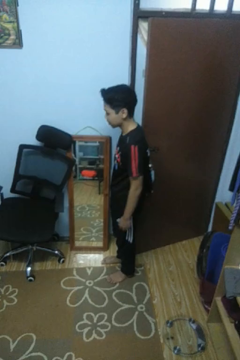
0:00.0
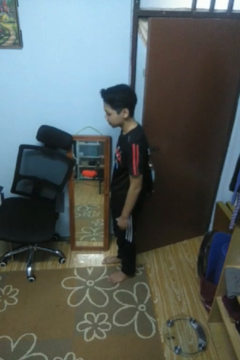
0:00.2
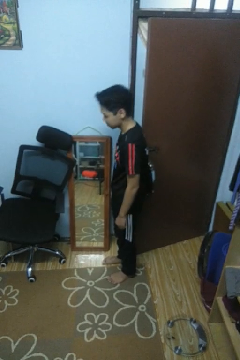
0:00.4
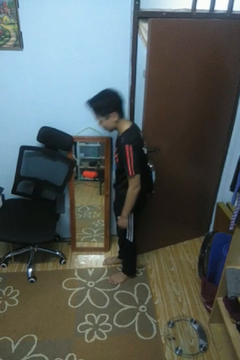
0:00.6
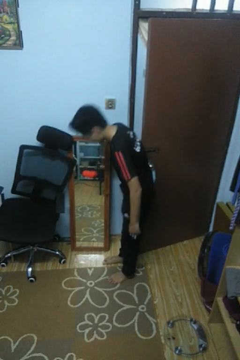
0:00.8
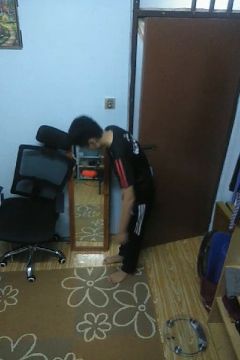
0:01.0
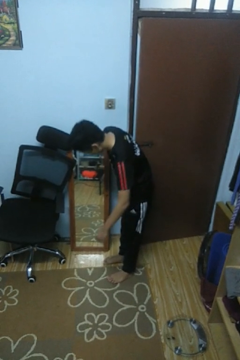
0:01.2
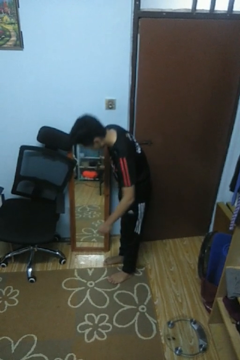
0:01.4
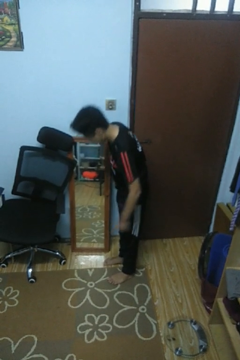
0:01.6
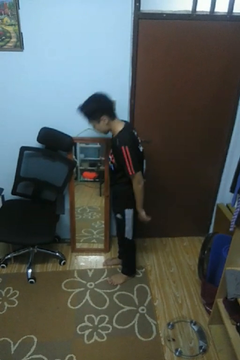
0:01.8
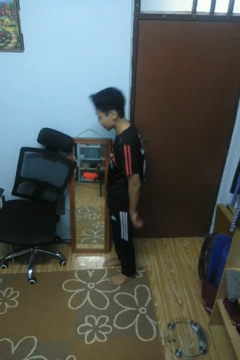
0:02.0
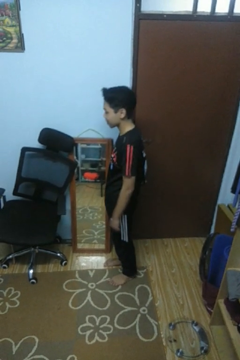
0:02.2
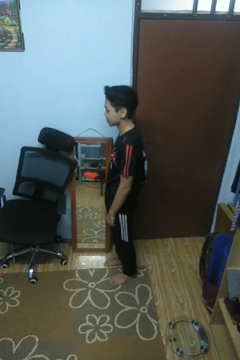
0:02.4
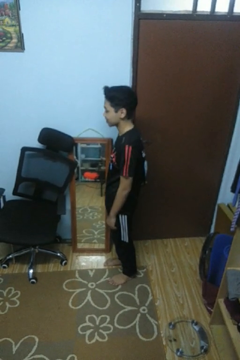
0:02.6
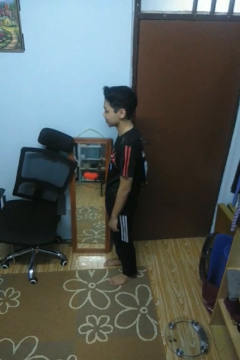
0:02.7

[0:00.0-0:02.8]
person closes door with hip

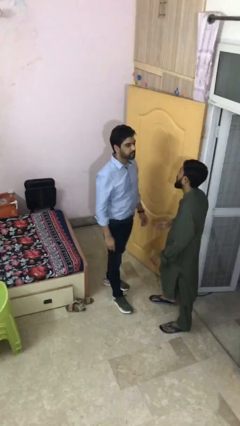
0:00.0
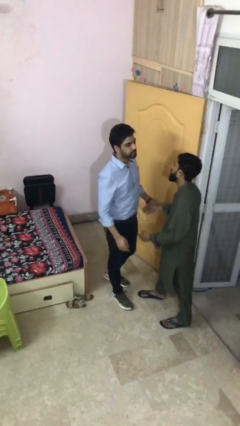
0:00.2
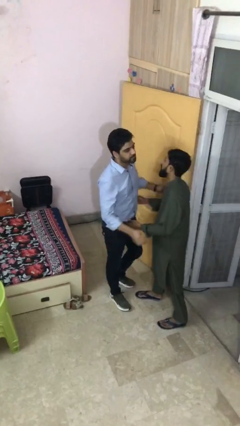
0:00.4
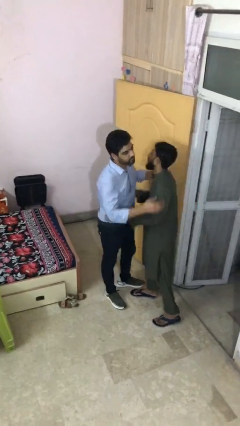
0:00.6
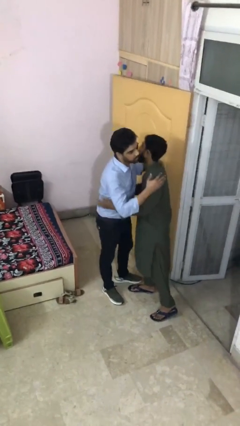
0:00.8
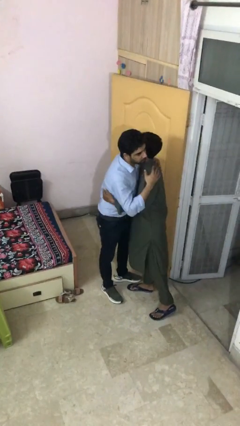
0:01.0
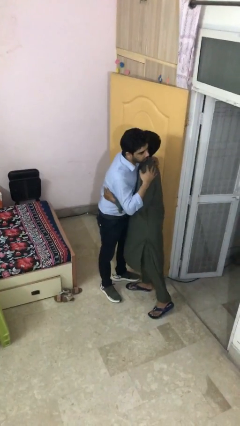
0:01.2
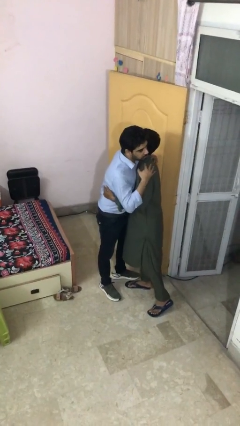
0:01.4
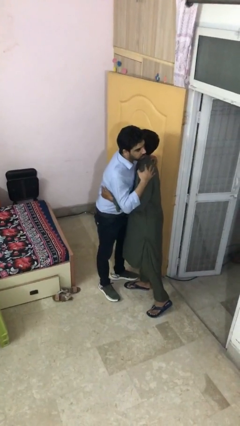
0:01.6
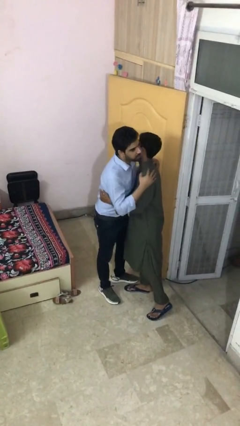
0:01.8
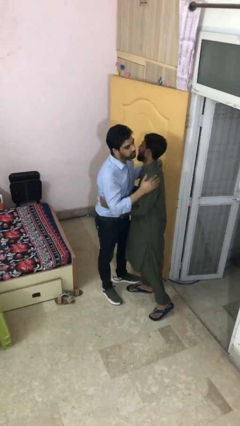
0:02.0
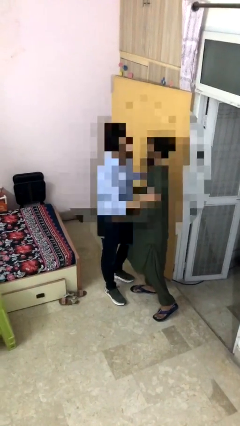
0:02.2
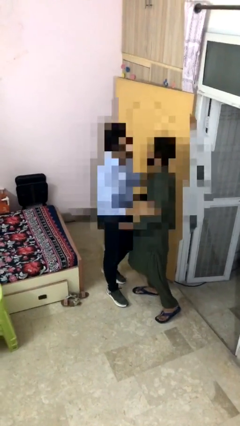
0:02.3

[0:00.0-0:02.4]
person embraces person

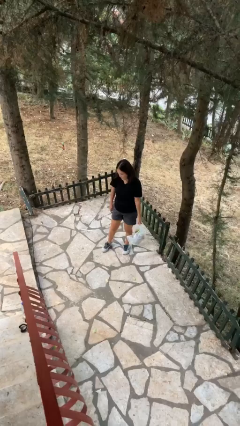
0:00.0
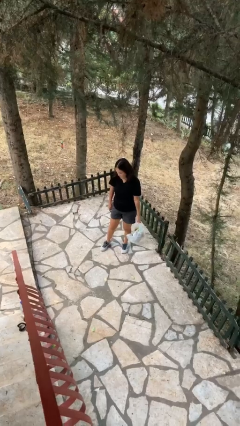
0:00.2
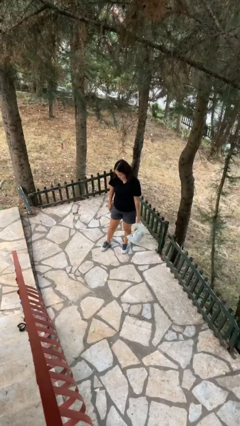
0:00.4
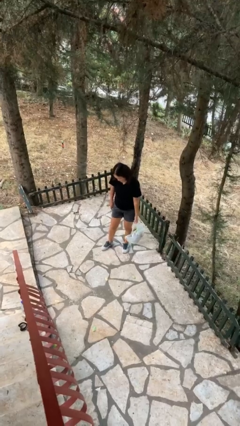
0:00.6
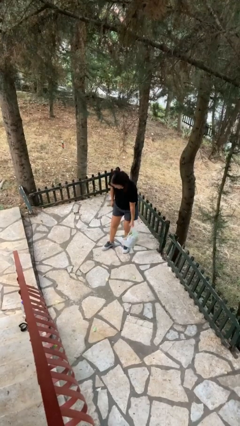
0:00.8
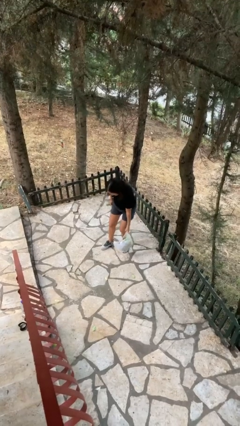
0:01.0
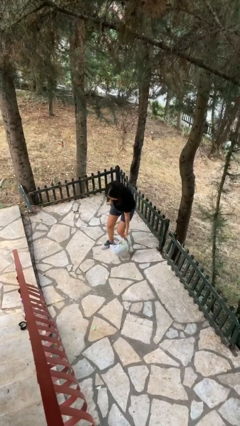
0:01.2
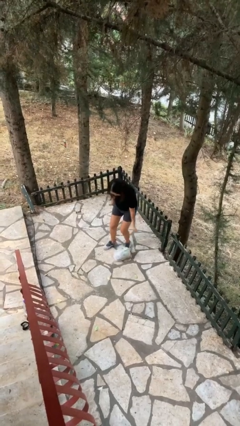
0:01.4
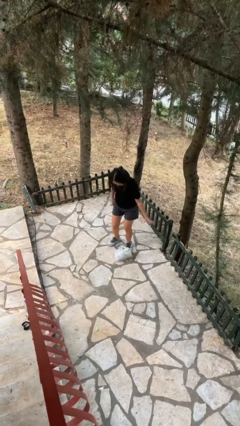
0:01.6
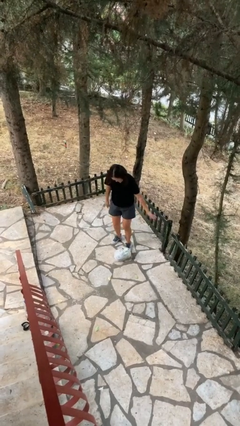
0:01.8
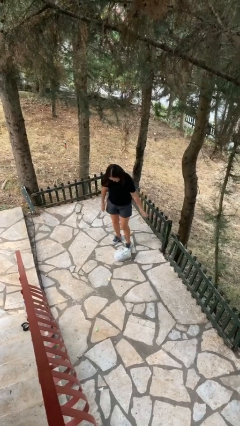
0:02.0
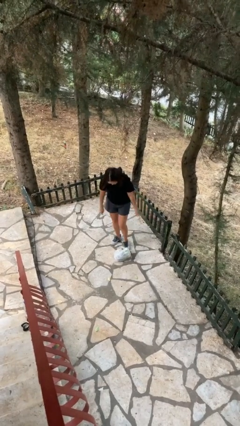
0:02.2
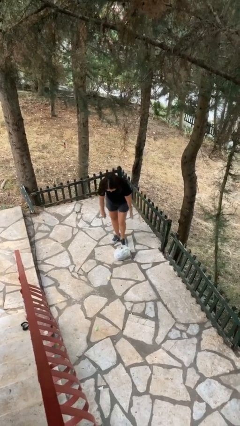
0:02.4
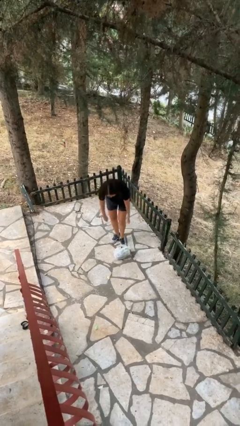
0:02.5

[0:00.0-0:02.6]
person drops object

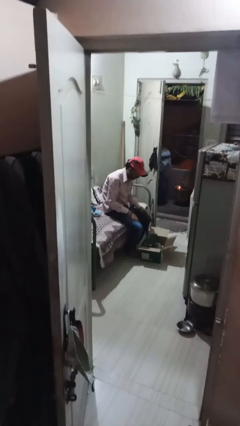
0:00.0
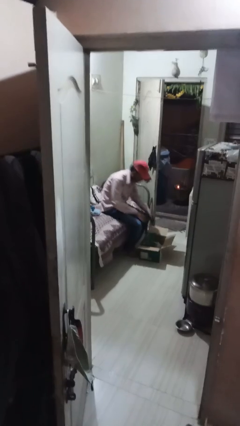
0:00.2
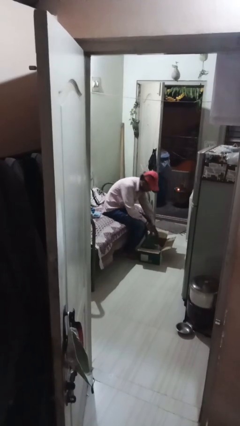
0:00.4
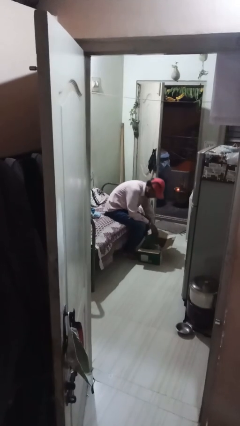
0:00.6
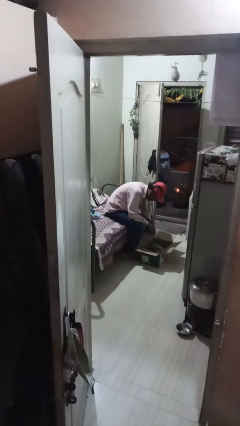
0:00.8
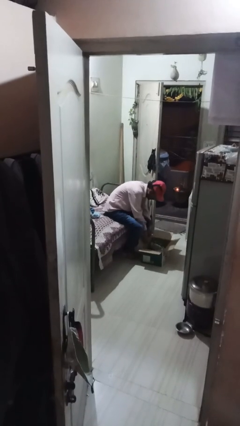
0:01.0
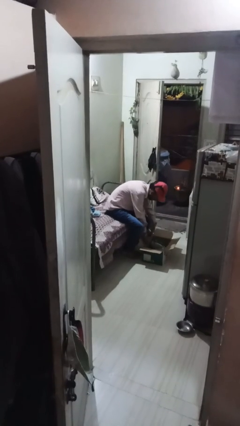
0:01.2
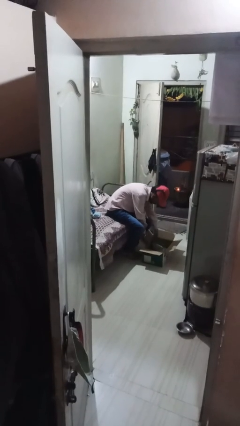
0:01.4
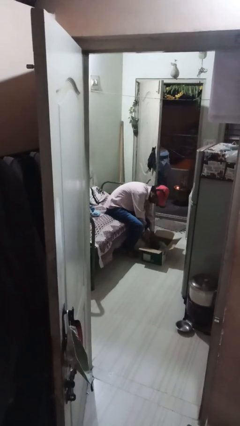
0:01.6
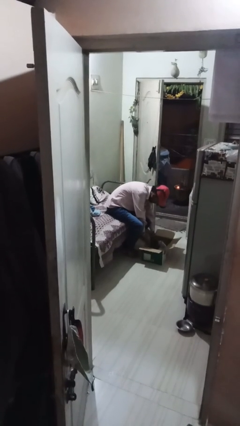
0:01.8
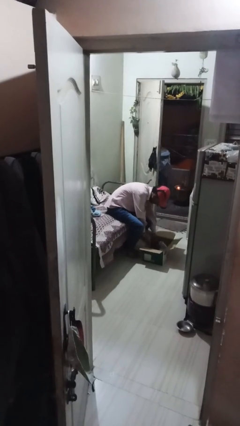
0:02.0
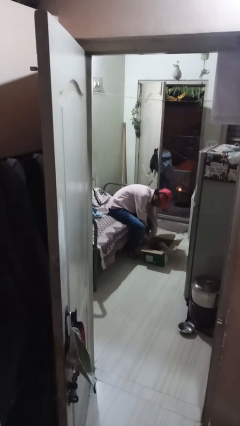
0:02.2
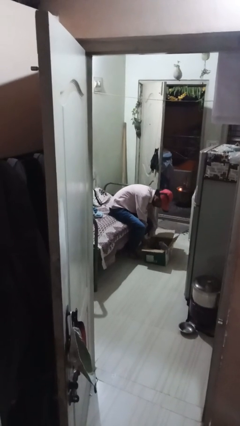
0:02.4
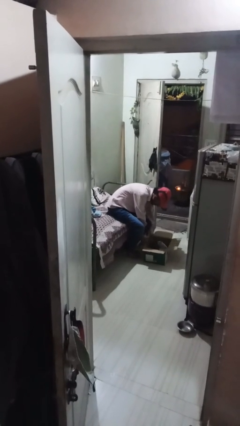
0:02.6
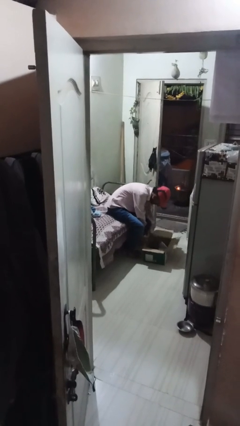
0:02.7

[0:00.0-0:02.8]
person searches in box

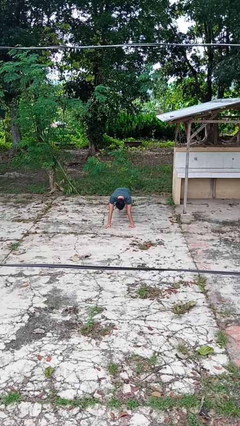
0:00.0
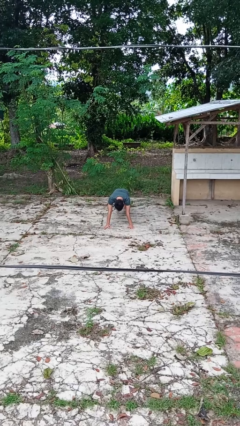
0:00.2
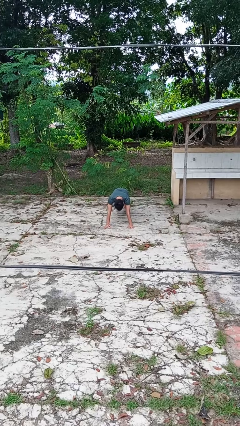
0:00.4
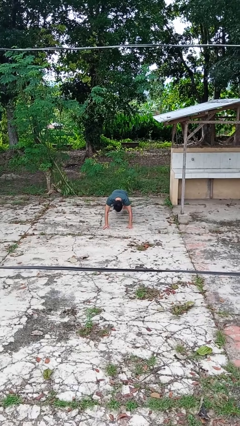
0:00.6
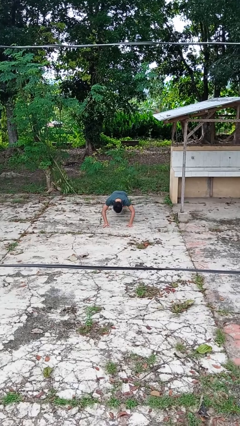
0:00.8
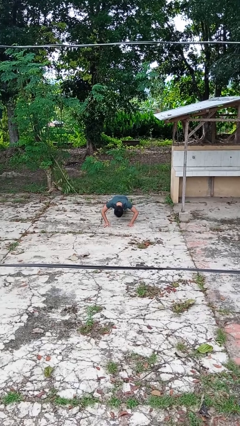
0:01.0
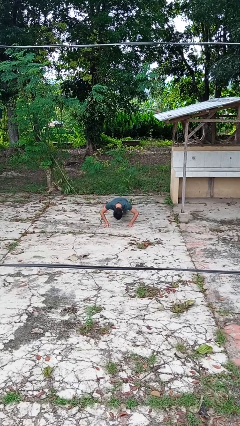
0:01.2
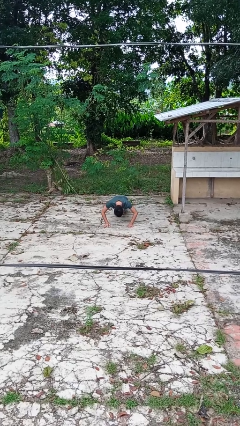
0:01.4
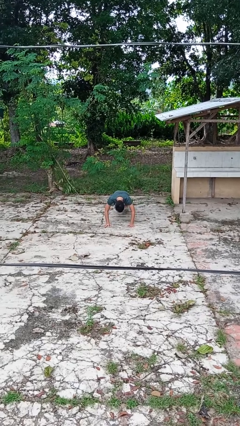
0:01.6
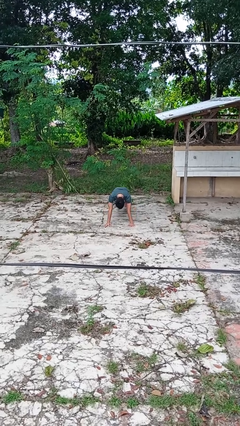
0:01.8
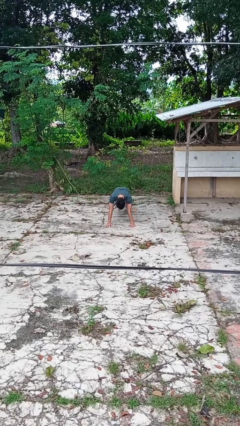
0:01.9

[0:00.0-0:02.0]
person exercises with pushup

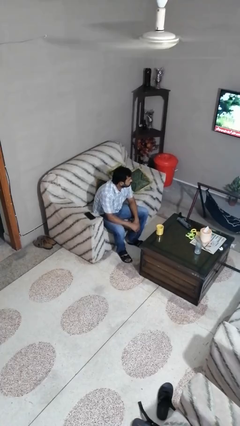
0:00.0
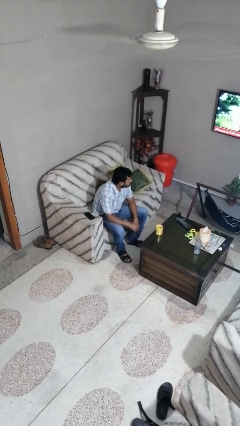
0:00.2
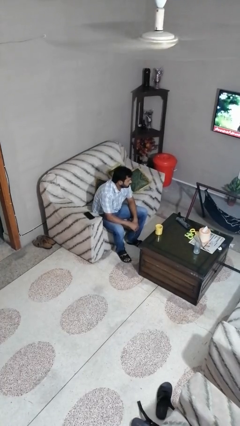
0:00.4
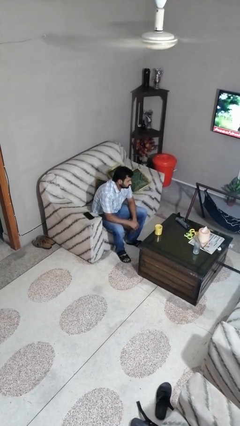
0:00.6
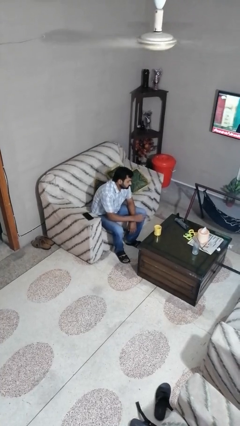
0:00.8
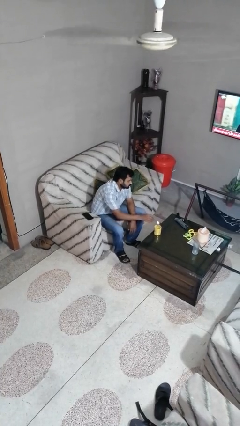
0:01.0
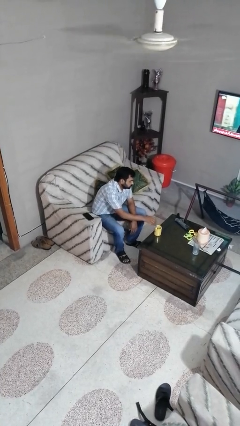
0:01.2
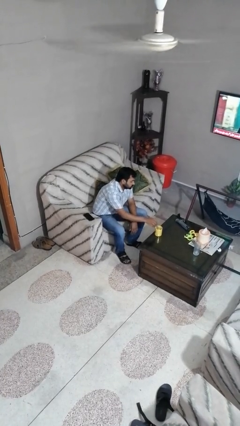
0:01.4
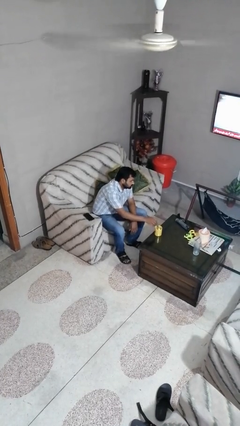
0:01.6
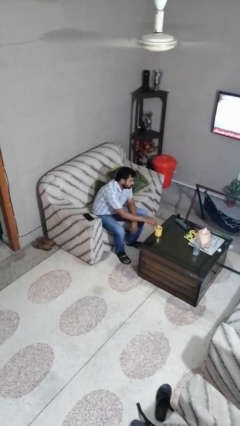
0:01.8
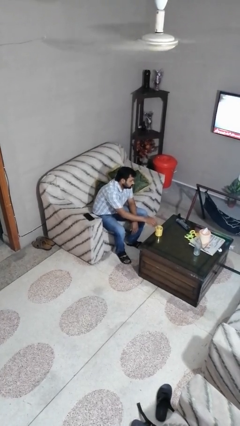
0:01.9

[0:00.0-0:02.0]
person stirs mug

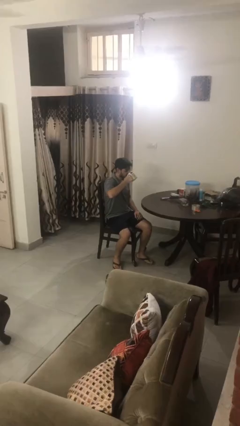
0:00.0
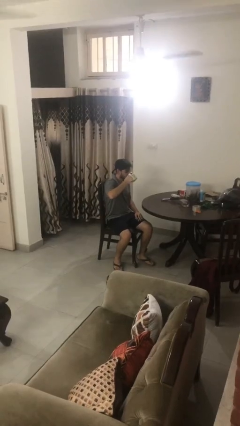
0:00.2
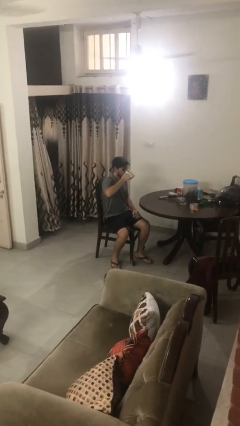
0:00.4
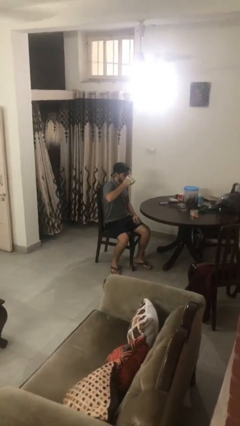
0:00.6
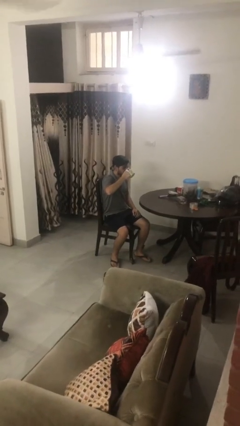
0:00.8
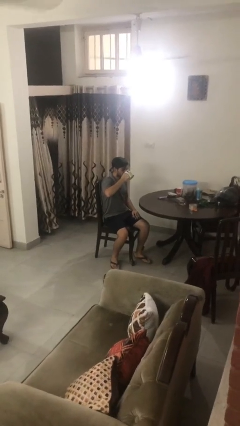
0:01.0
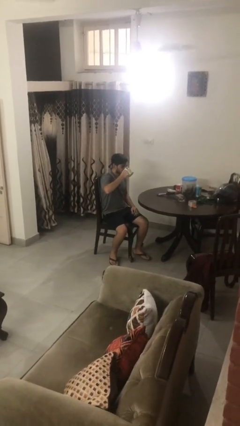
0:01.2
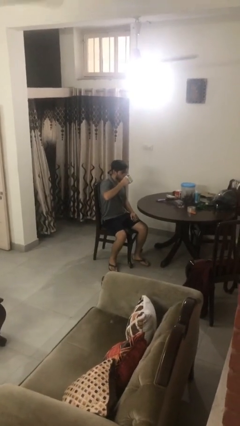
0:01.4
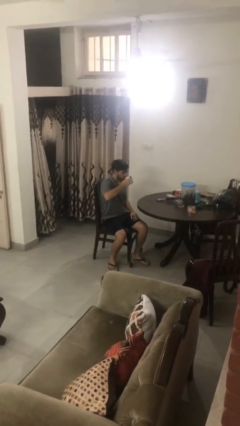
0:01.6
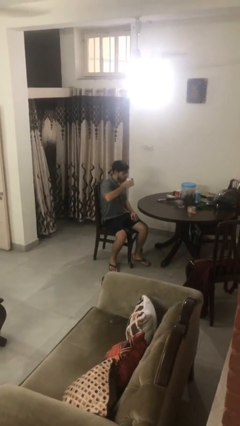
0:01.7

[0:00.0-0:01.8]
person puts down object on table

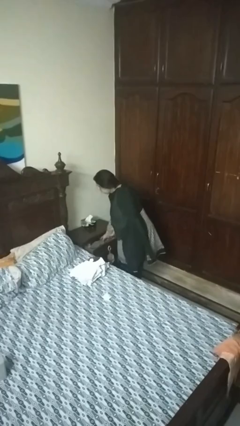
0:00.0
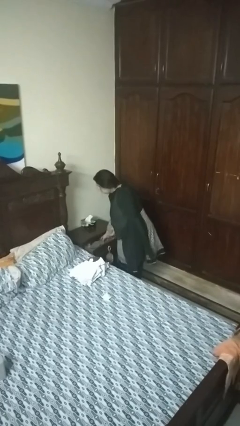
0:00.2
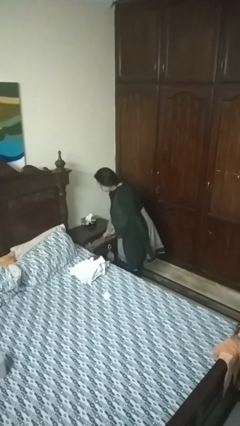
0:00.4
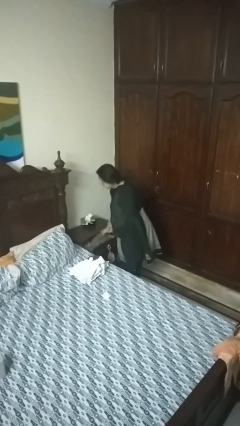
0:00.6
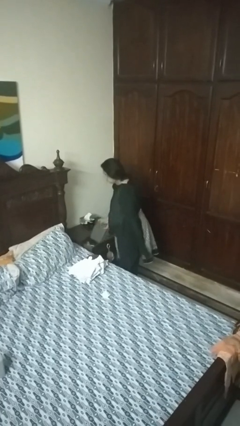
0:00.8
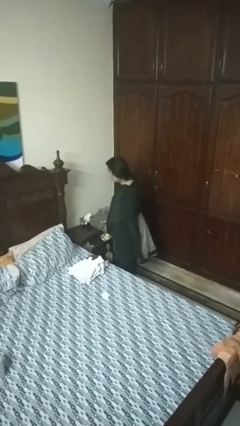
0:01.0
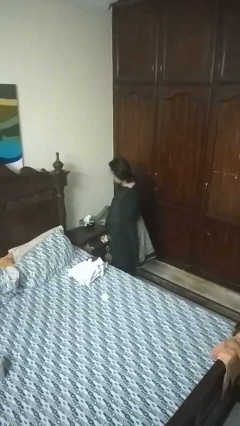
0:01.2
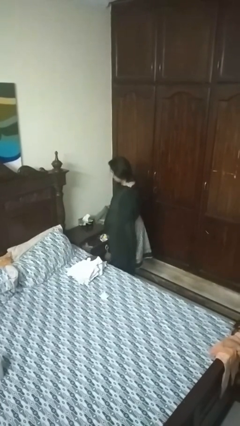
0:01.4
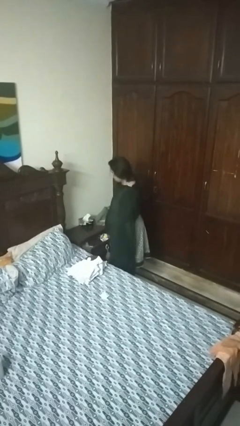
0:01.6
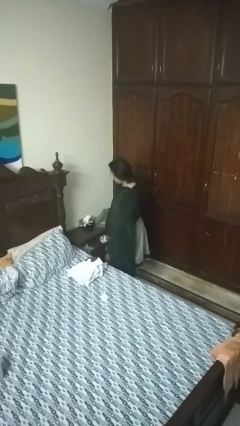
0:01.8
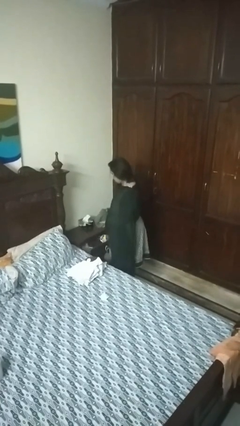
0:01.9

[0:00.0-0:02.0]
person takes clothes from dresser
